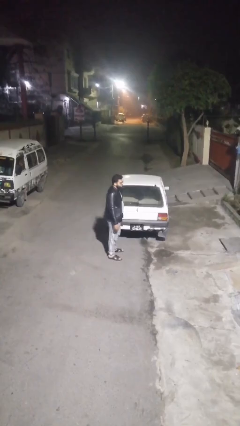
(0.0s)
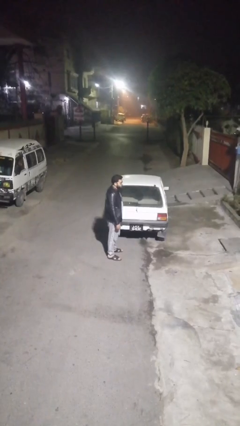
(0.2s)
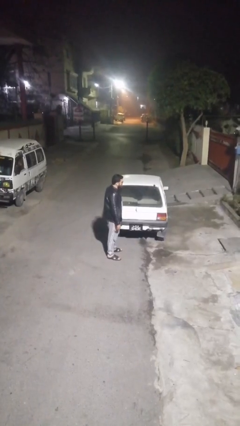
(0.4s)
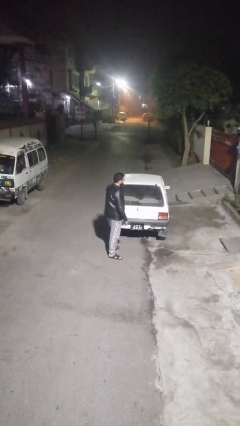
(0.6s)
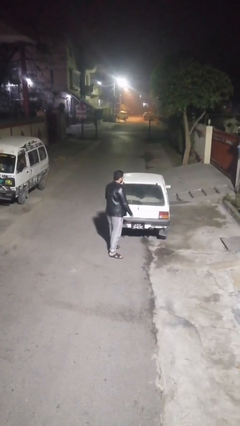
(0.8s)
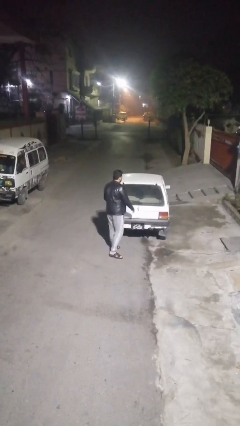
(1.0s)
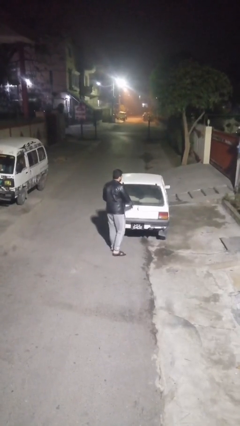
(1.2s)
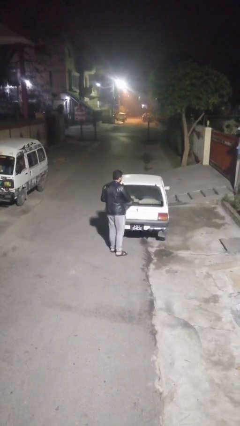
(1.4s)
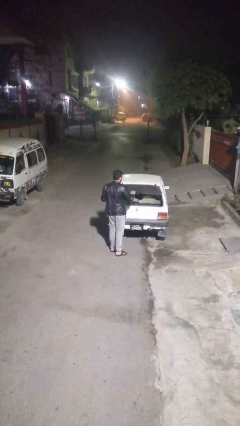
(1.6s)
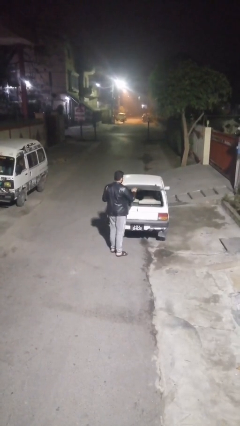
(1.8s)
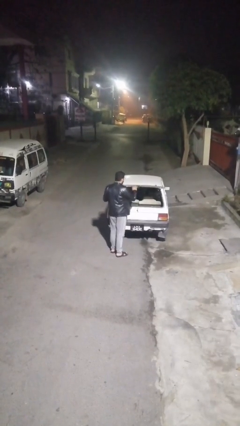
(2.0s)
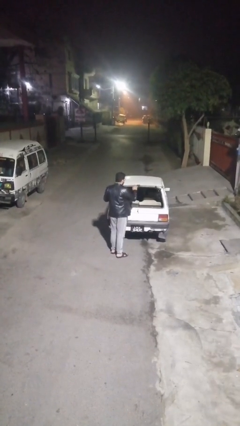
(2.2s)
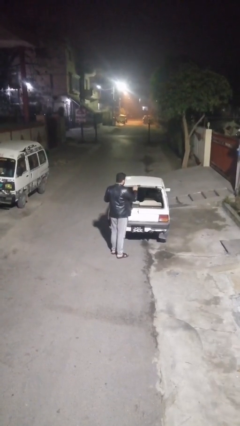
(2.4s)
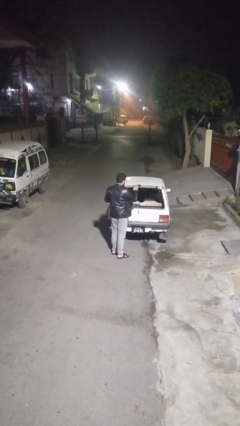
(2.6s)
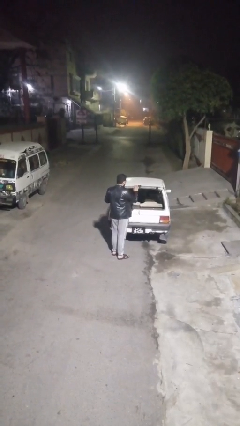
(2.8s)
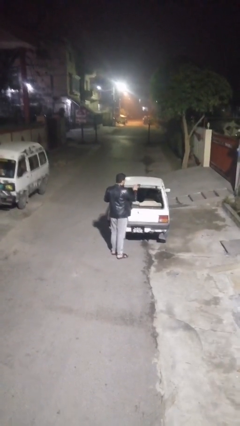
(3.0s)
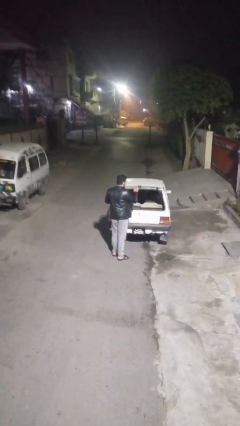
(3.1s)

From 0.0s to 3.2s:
person opens car trunk

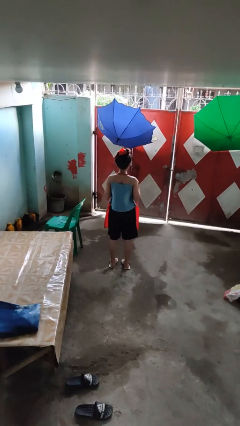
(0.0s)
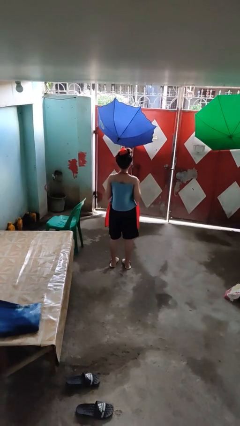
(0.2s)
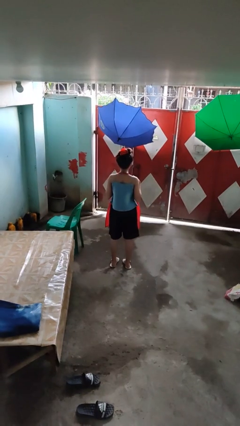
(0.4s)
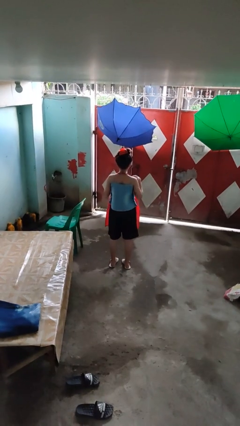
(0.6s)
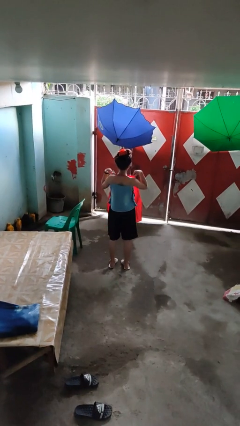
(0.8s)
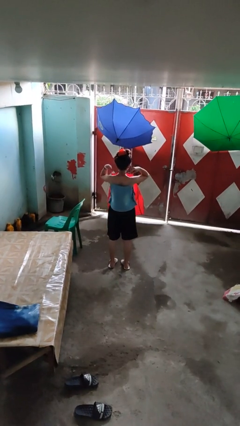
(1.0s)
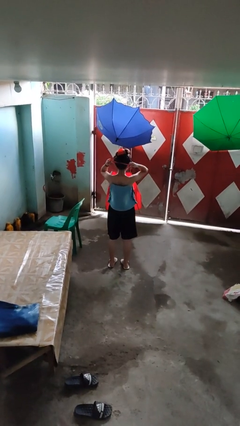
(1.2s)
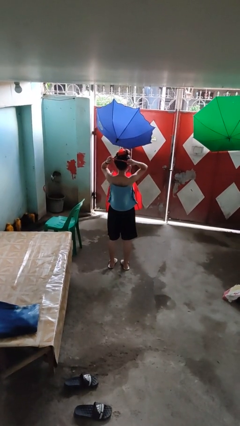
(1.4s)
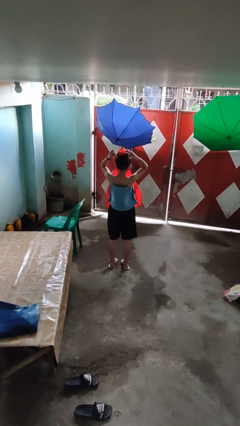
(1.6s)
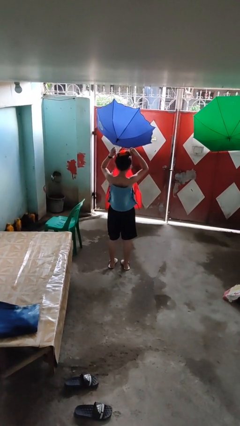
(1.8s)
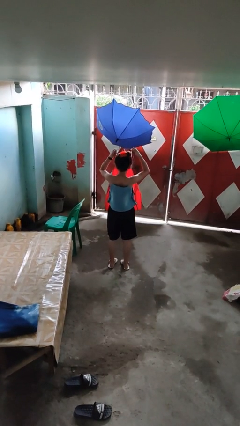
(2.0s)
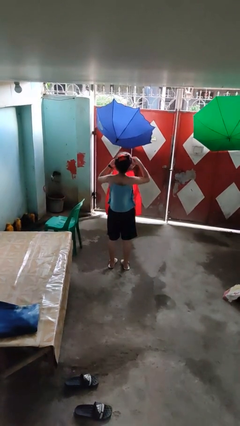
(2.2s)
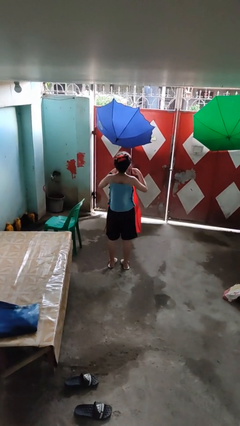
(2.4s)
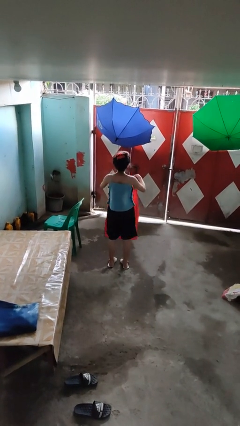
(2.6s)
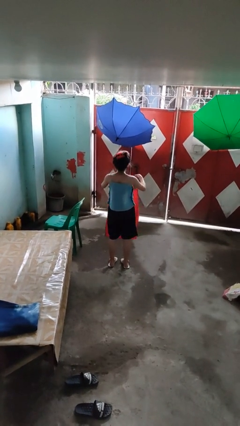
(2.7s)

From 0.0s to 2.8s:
person takes off apron

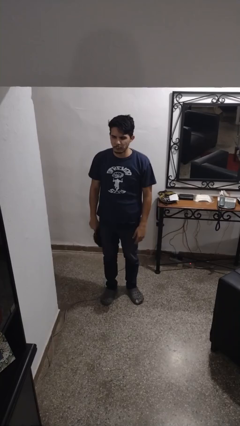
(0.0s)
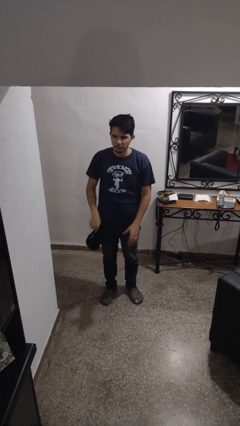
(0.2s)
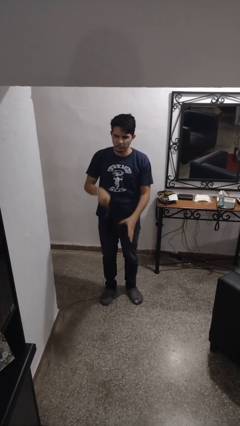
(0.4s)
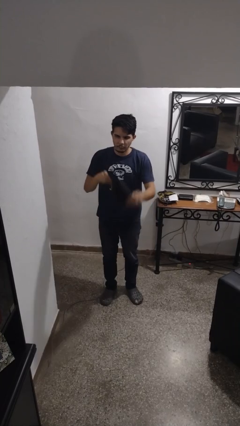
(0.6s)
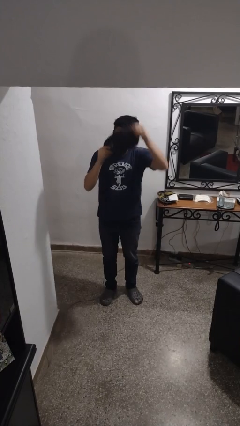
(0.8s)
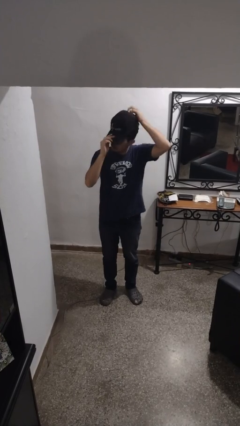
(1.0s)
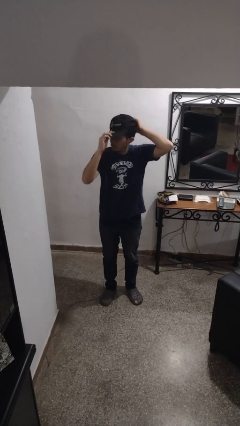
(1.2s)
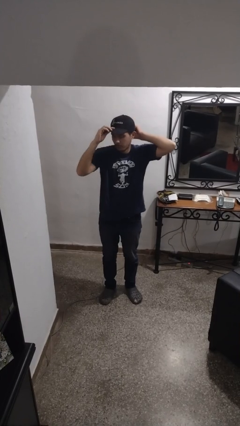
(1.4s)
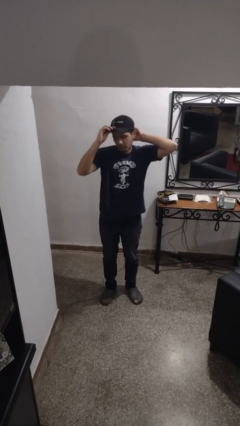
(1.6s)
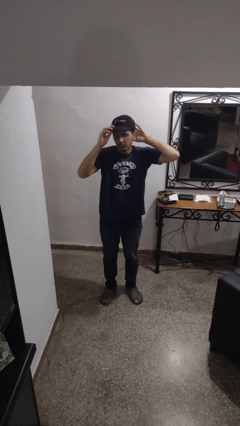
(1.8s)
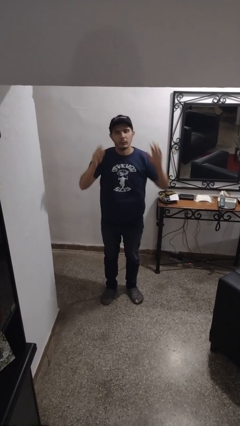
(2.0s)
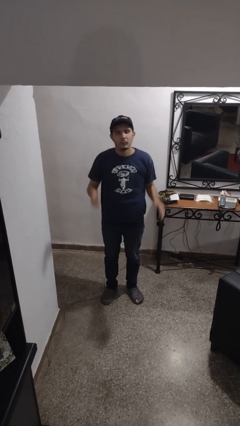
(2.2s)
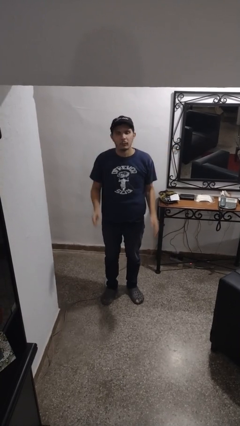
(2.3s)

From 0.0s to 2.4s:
person puts on hat

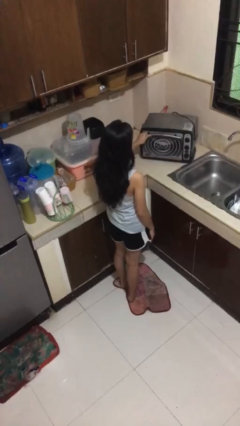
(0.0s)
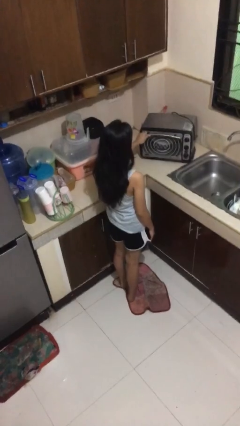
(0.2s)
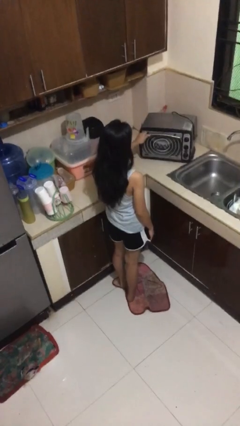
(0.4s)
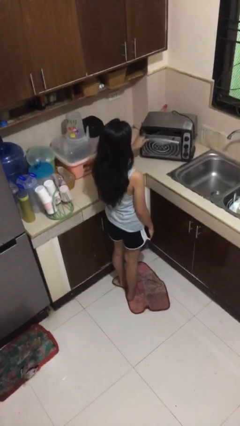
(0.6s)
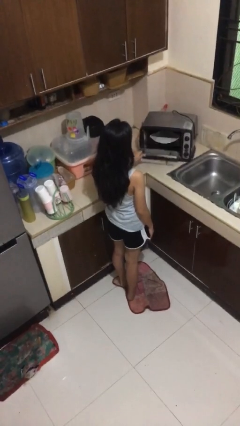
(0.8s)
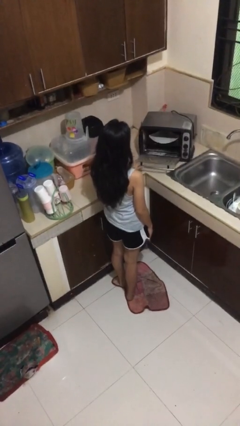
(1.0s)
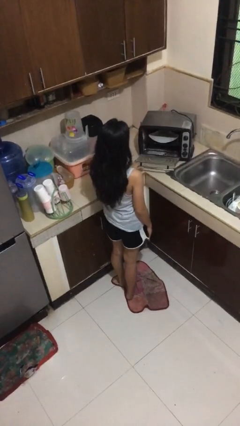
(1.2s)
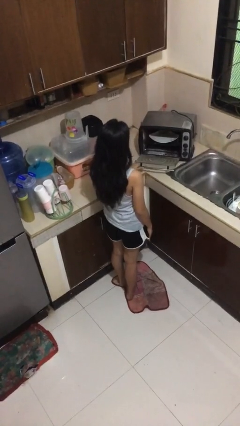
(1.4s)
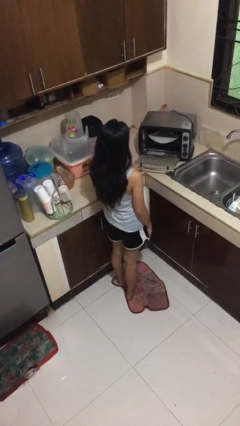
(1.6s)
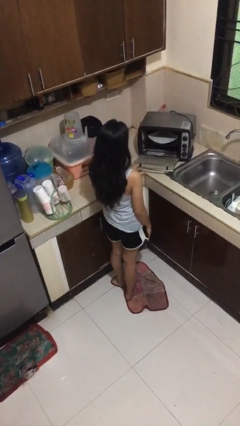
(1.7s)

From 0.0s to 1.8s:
person opens microwave

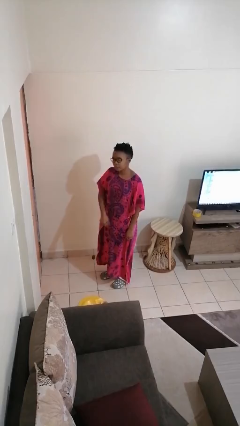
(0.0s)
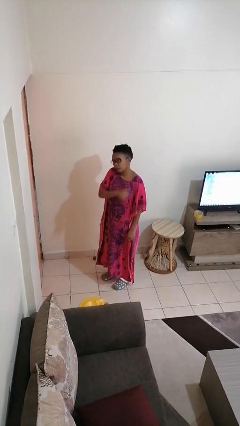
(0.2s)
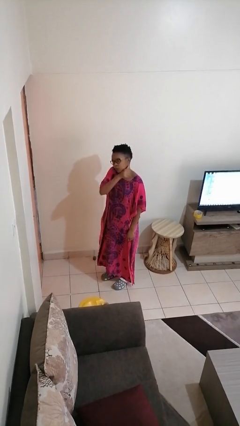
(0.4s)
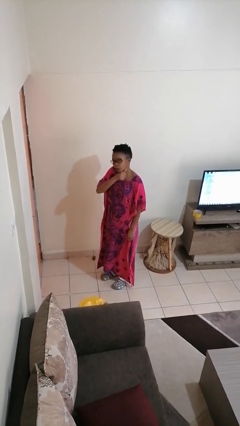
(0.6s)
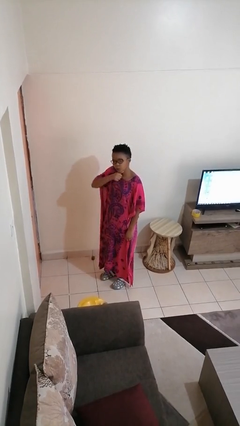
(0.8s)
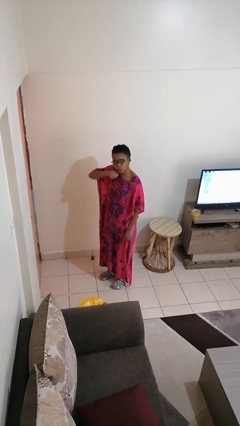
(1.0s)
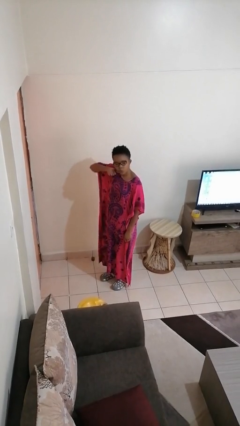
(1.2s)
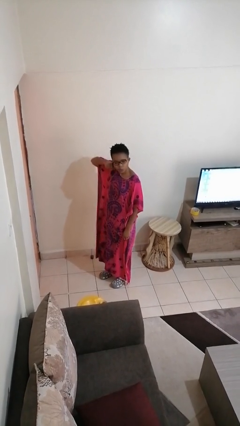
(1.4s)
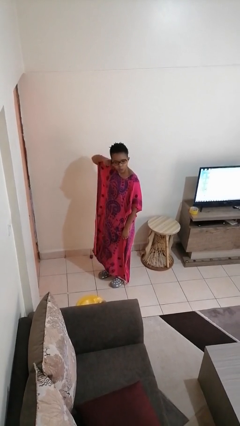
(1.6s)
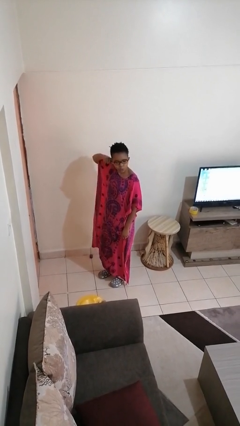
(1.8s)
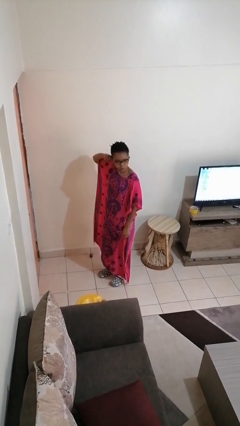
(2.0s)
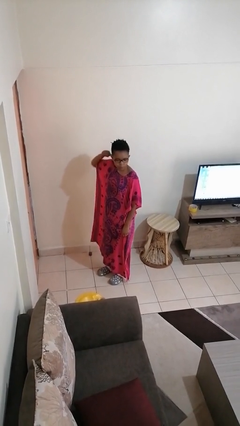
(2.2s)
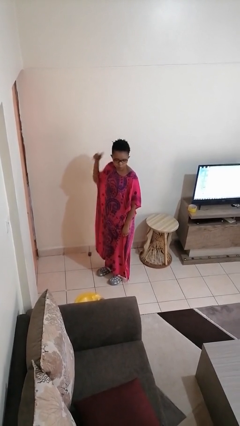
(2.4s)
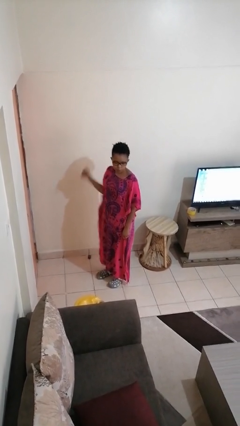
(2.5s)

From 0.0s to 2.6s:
person gestures cut

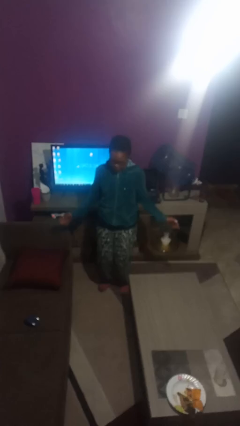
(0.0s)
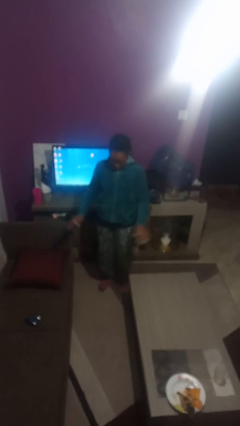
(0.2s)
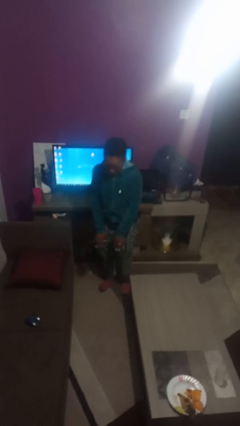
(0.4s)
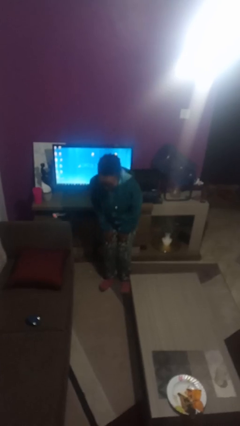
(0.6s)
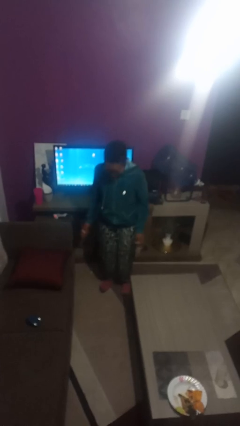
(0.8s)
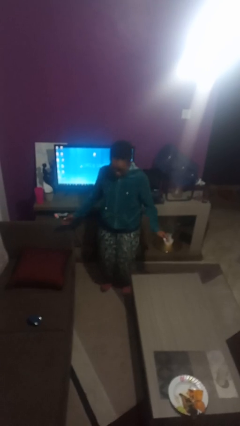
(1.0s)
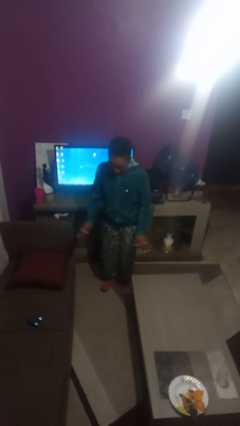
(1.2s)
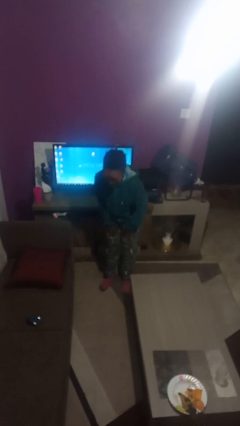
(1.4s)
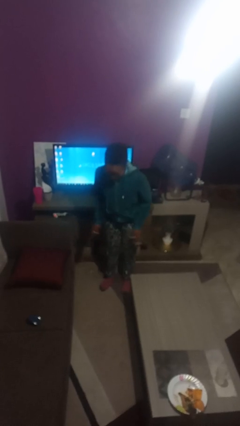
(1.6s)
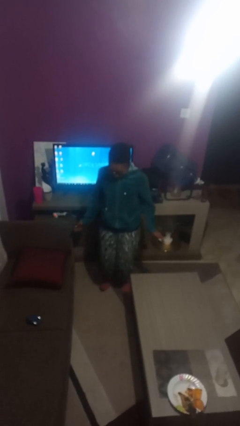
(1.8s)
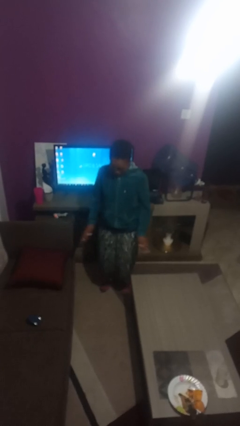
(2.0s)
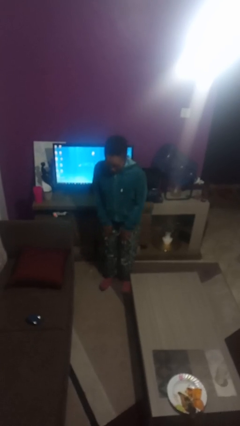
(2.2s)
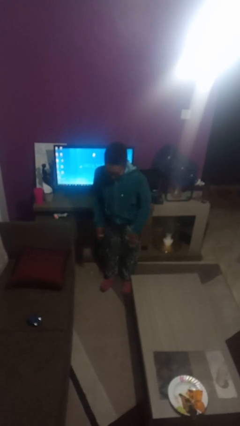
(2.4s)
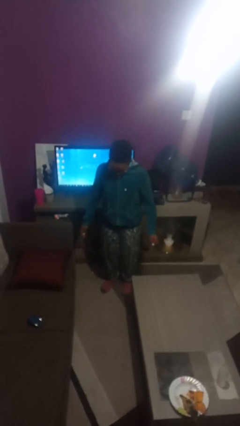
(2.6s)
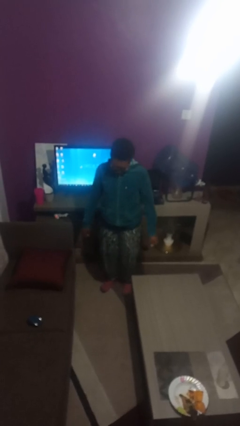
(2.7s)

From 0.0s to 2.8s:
person dances in place

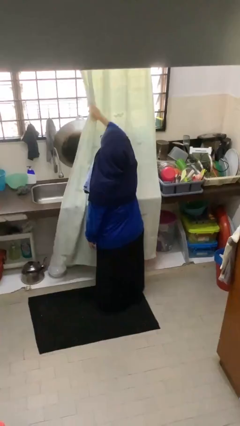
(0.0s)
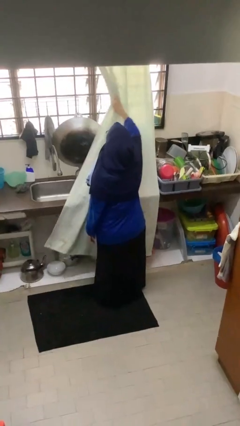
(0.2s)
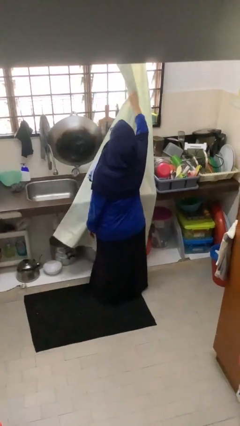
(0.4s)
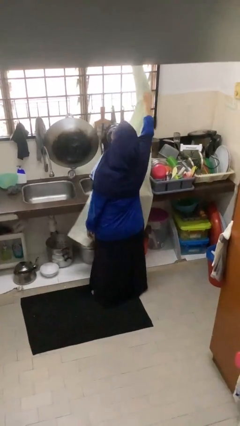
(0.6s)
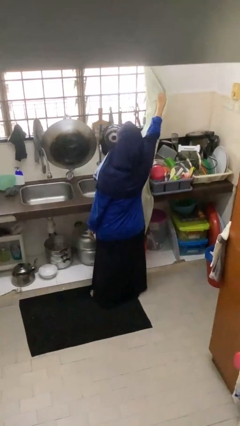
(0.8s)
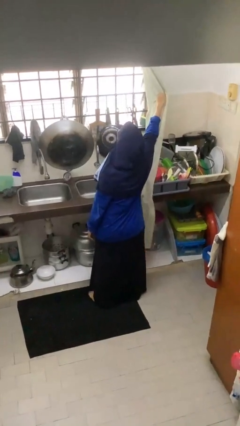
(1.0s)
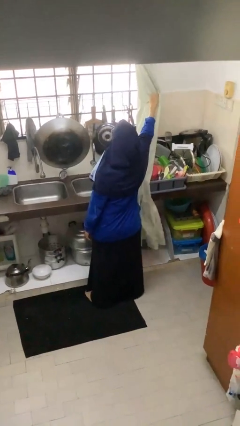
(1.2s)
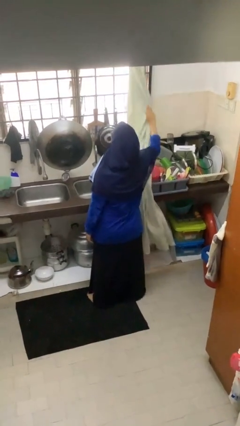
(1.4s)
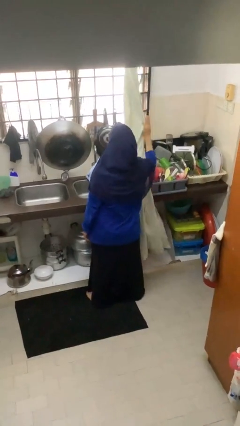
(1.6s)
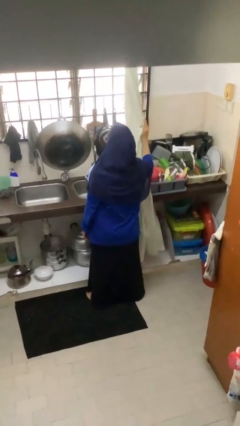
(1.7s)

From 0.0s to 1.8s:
person opens curtains
